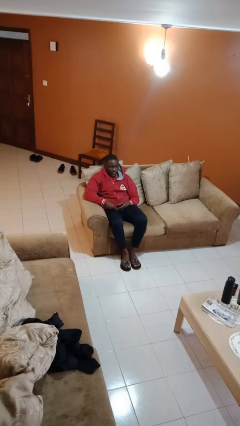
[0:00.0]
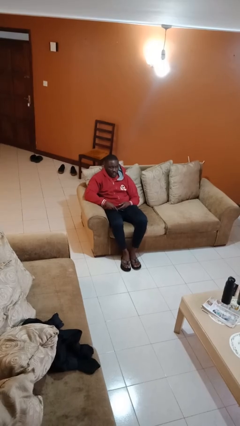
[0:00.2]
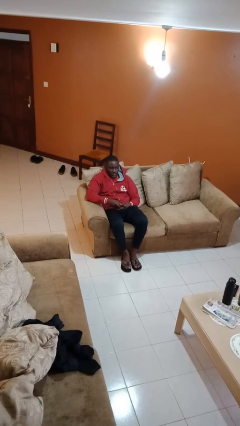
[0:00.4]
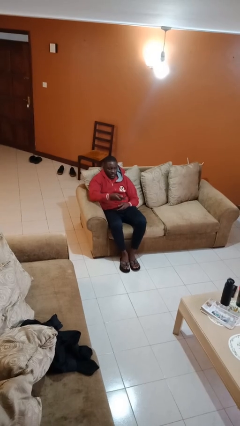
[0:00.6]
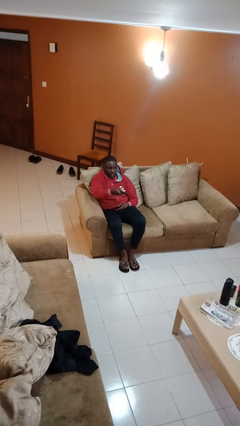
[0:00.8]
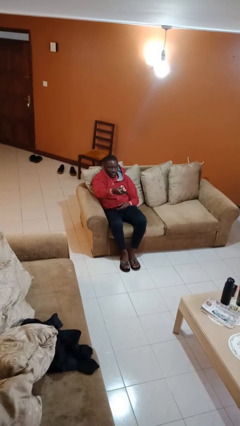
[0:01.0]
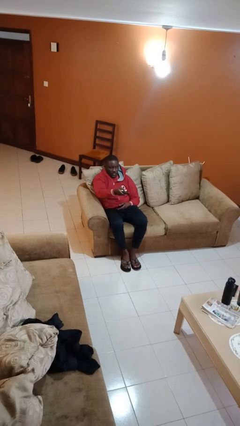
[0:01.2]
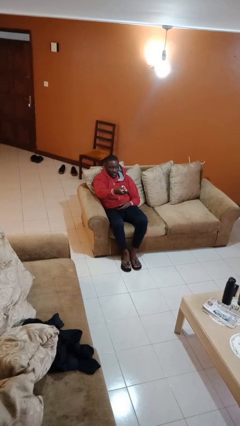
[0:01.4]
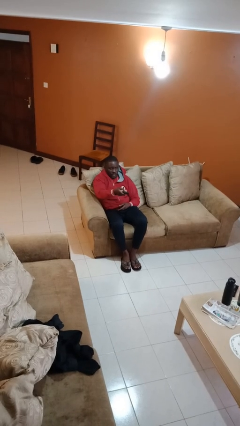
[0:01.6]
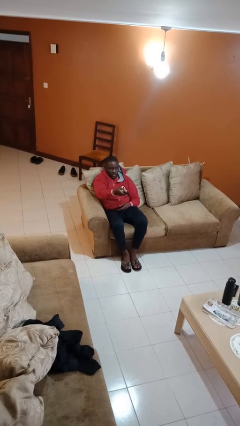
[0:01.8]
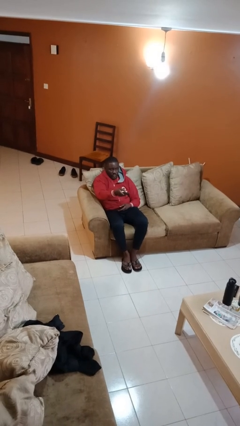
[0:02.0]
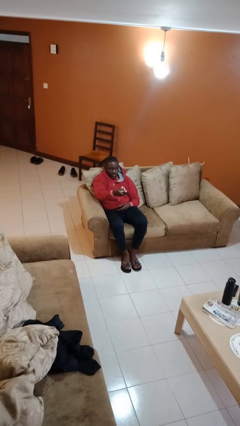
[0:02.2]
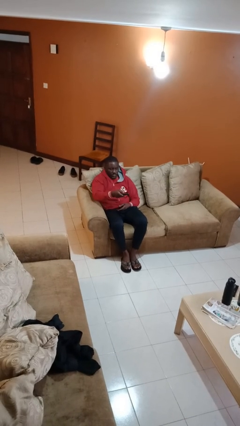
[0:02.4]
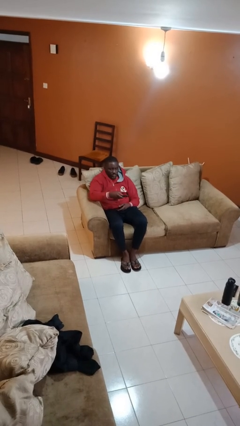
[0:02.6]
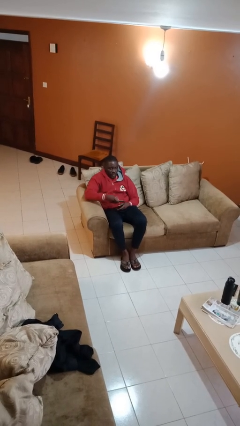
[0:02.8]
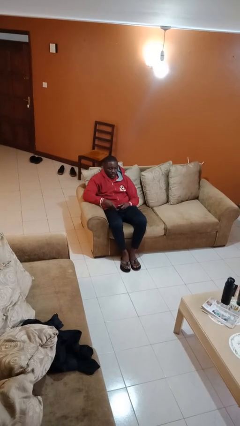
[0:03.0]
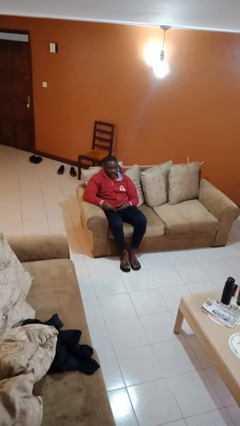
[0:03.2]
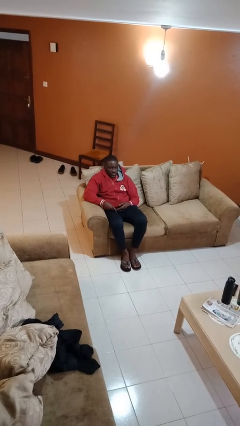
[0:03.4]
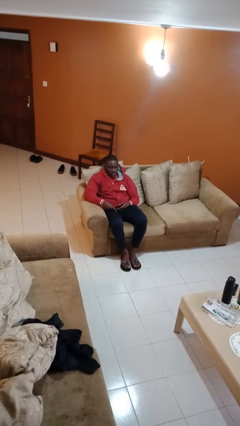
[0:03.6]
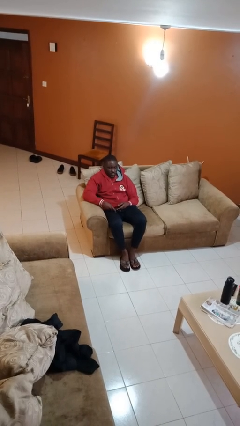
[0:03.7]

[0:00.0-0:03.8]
person uses television remote

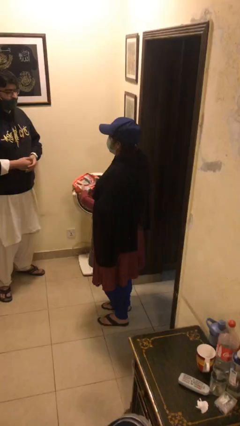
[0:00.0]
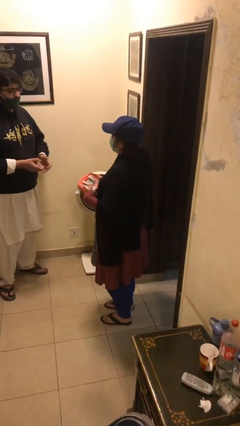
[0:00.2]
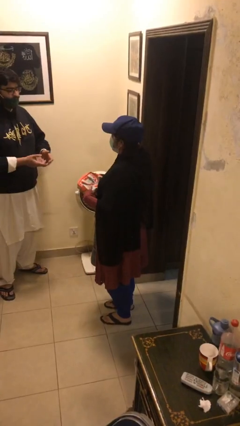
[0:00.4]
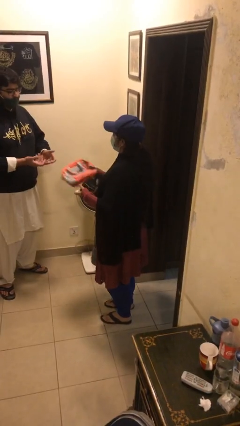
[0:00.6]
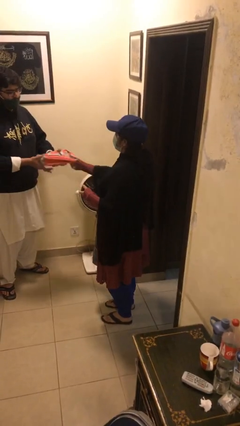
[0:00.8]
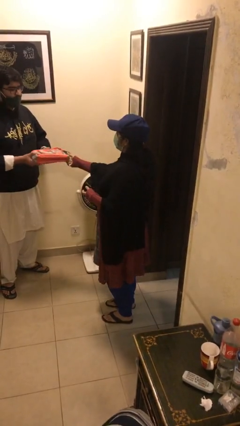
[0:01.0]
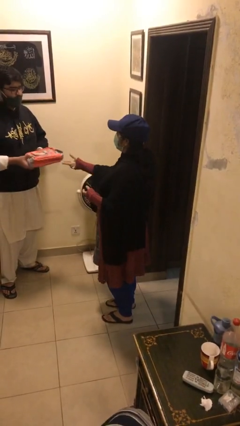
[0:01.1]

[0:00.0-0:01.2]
person transfers object to person

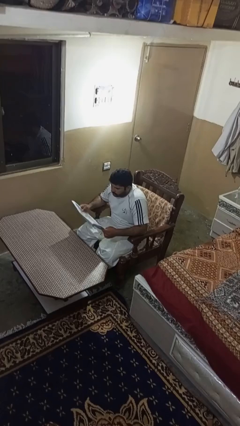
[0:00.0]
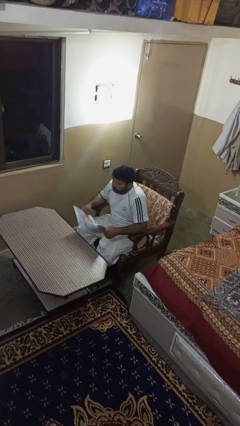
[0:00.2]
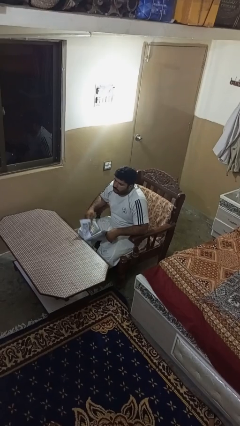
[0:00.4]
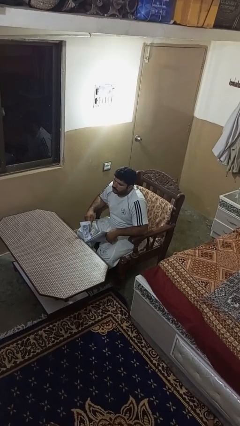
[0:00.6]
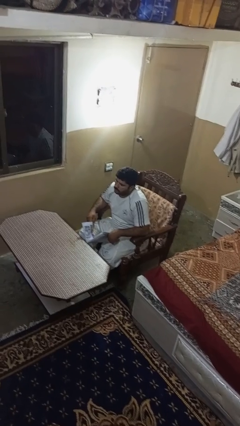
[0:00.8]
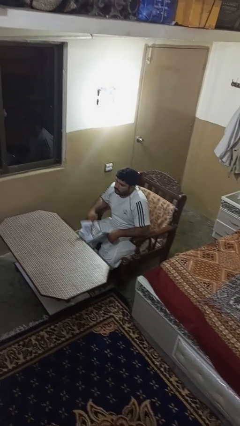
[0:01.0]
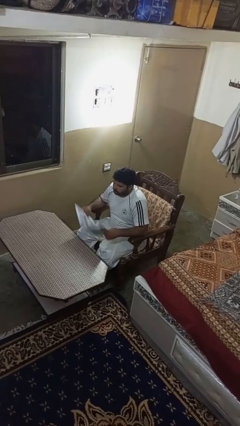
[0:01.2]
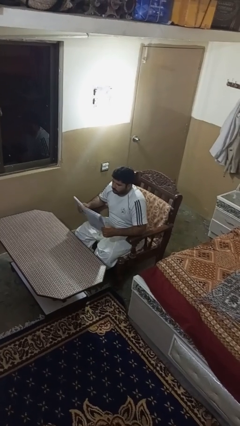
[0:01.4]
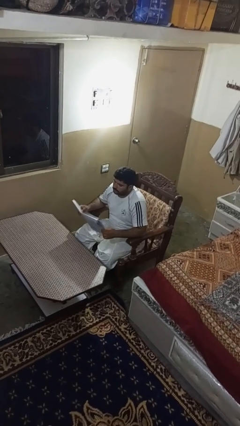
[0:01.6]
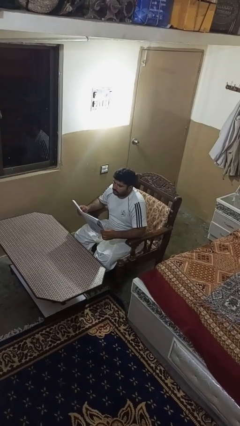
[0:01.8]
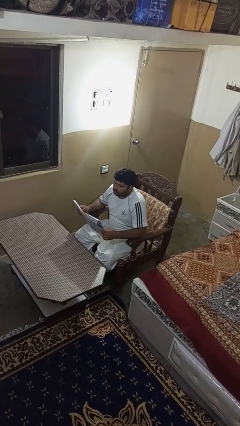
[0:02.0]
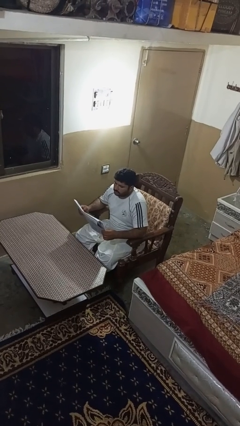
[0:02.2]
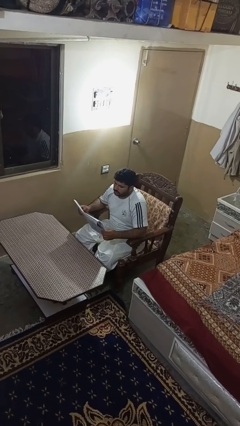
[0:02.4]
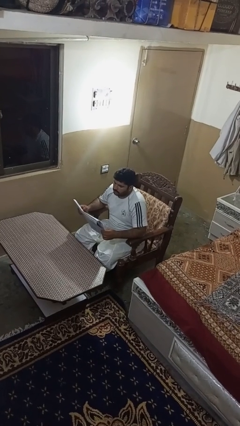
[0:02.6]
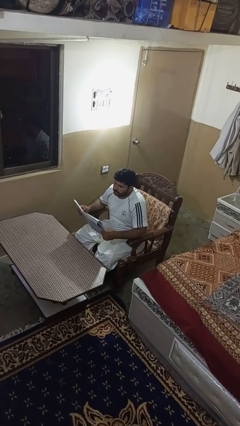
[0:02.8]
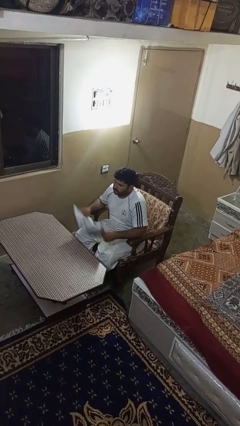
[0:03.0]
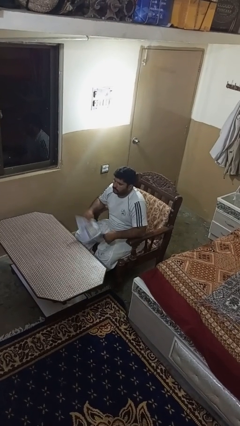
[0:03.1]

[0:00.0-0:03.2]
person reads newspaper

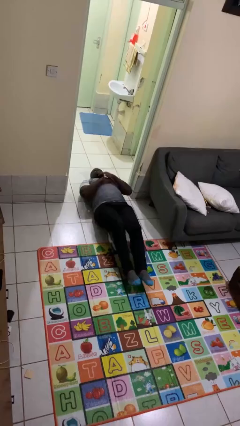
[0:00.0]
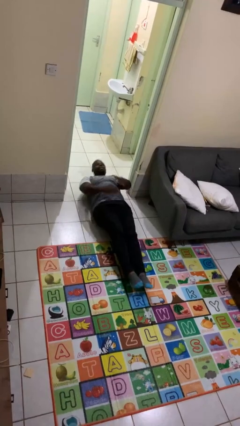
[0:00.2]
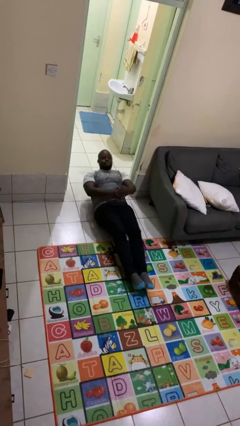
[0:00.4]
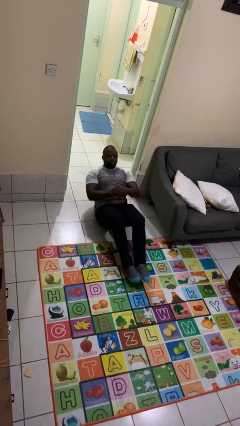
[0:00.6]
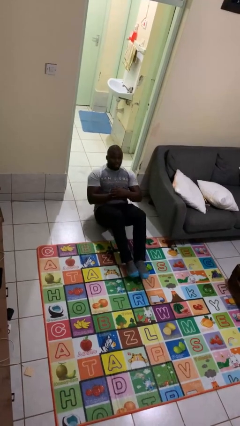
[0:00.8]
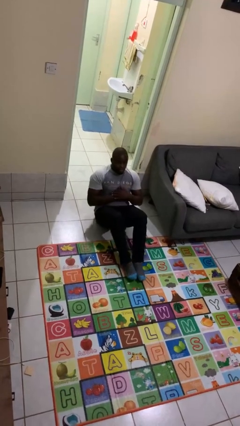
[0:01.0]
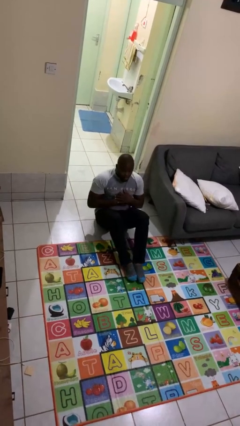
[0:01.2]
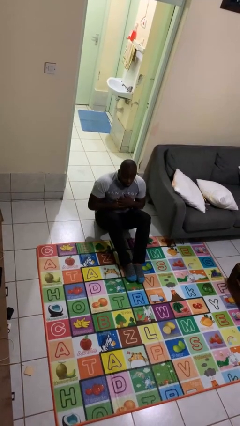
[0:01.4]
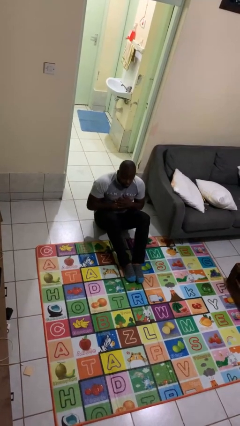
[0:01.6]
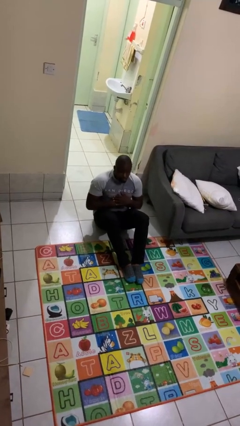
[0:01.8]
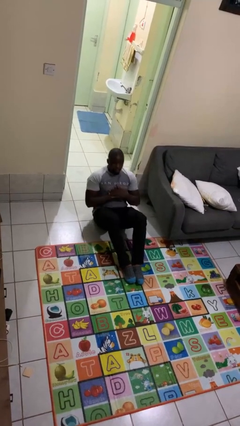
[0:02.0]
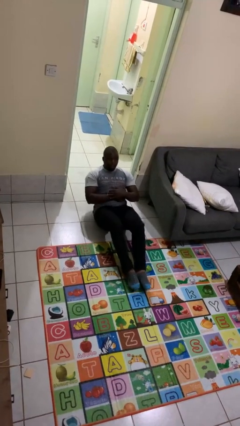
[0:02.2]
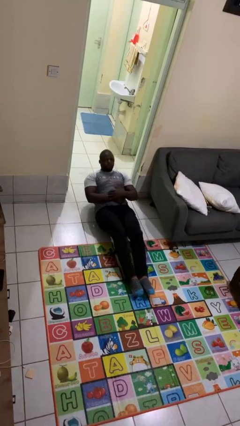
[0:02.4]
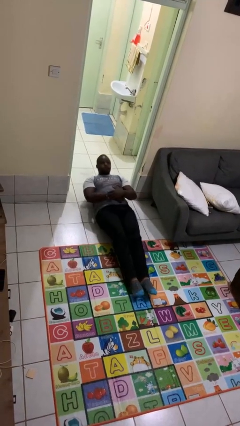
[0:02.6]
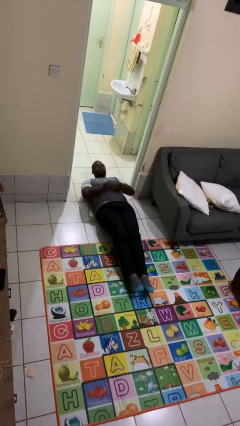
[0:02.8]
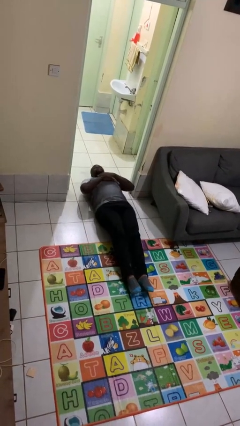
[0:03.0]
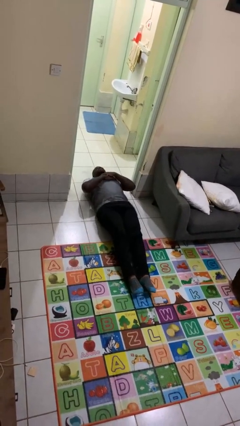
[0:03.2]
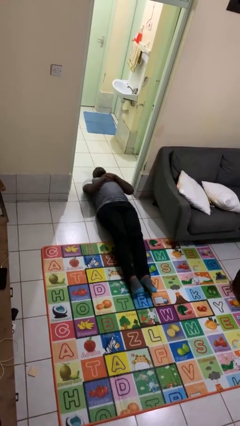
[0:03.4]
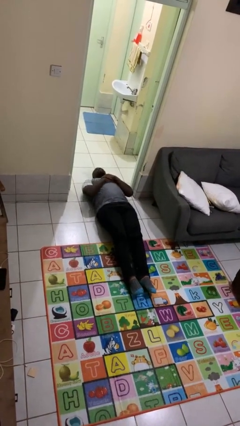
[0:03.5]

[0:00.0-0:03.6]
person exercises with situp

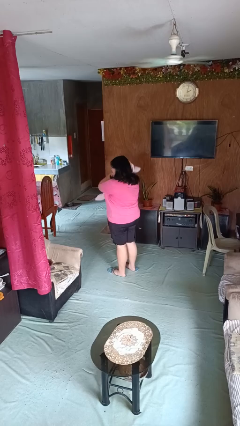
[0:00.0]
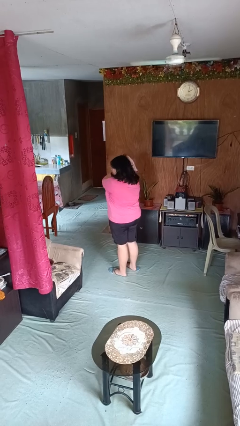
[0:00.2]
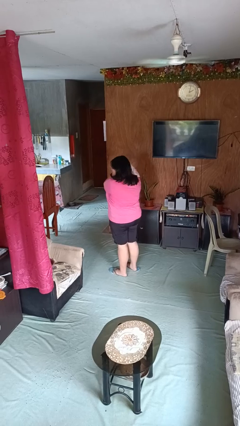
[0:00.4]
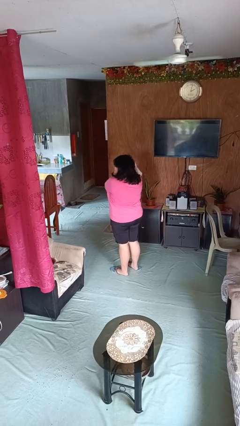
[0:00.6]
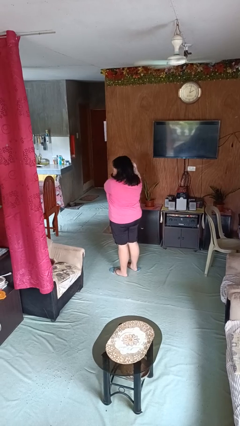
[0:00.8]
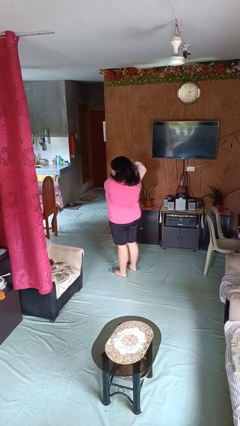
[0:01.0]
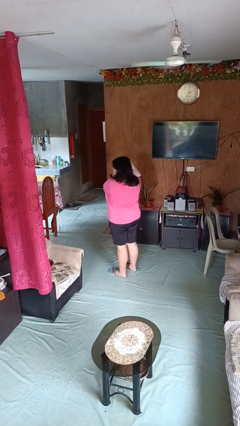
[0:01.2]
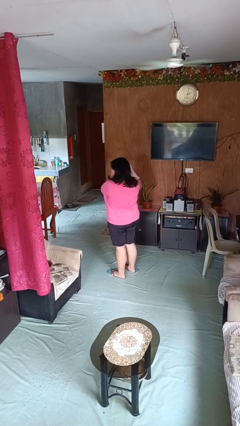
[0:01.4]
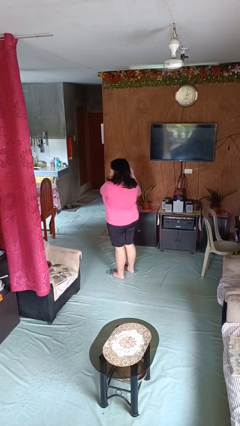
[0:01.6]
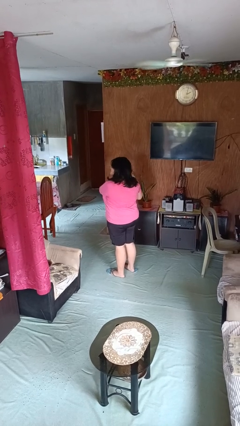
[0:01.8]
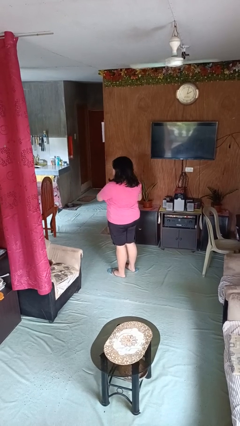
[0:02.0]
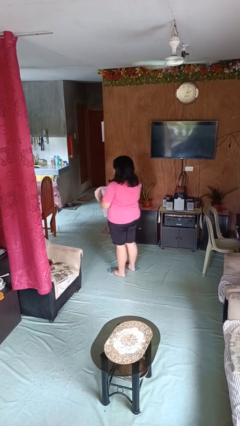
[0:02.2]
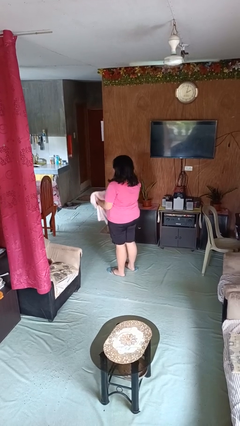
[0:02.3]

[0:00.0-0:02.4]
person dries hair with towel

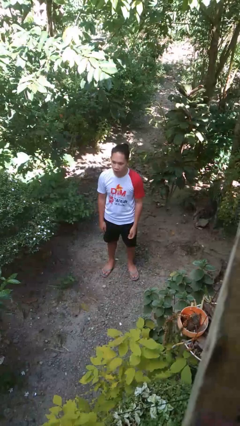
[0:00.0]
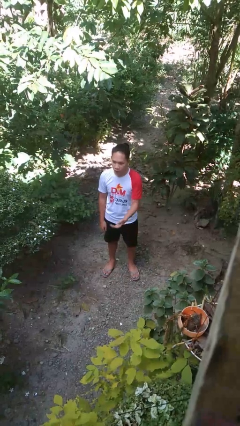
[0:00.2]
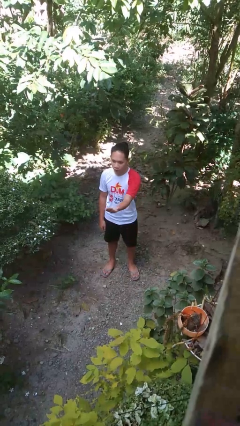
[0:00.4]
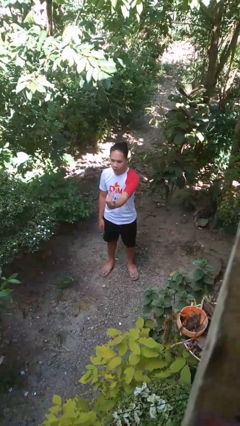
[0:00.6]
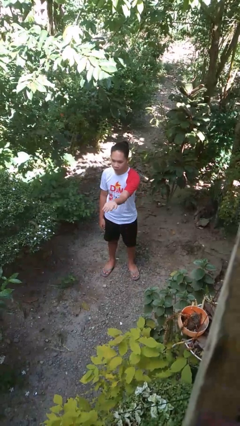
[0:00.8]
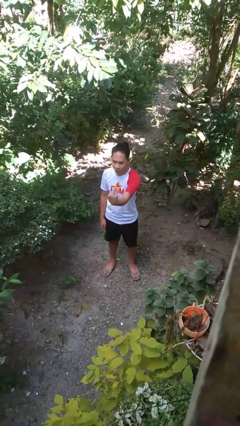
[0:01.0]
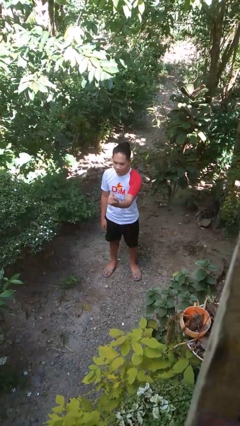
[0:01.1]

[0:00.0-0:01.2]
person gestures come here

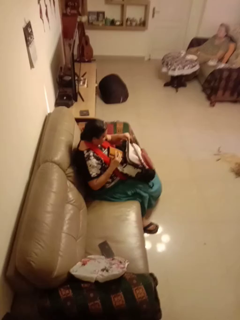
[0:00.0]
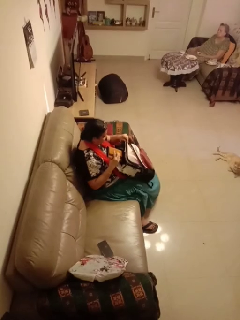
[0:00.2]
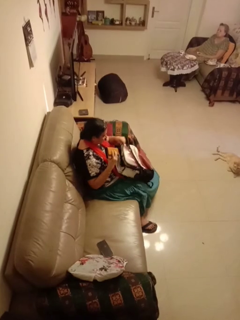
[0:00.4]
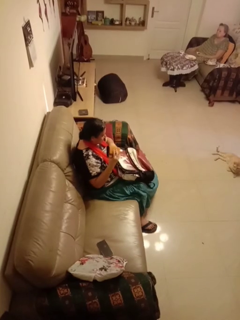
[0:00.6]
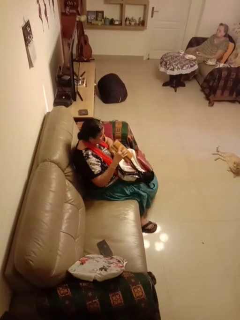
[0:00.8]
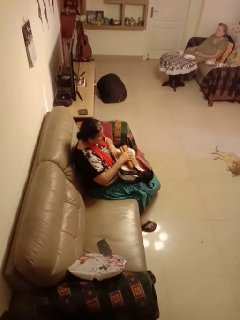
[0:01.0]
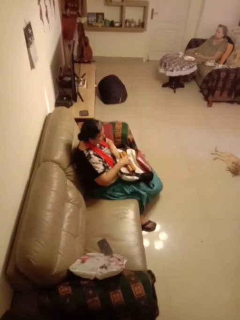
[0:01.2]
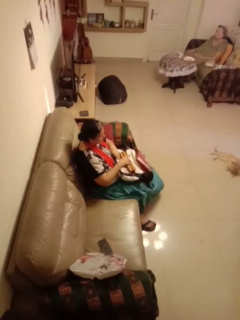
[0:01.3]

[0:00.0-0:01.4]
person takes object from backpack

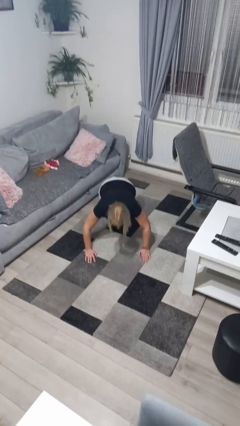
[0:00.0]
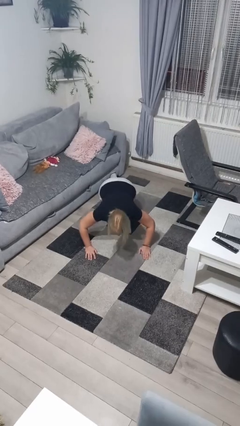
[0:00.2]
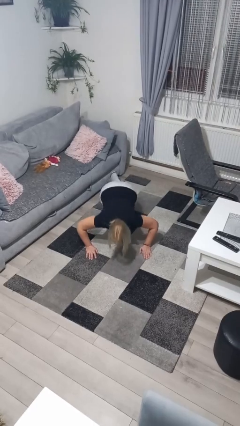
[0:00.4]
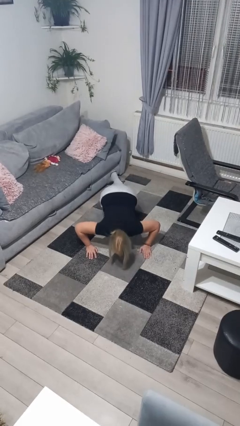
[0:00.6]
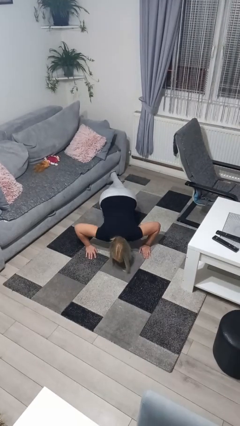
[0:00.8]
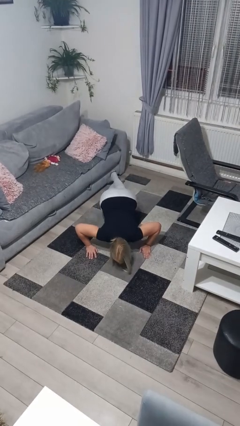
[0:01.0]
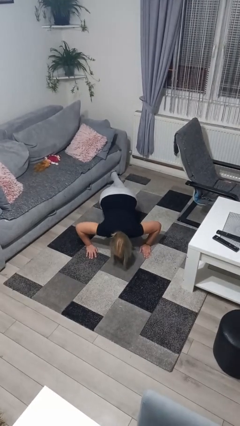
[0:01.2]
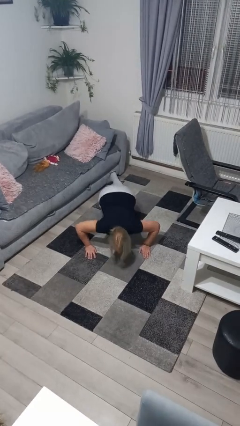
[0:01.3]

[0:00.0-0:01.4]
person exercises with pushup
